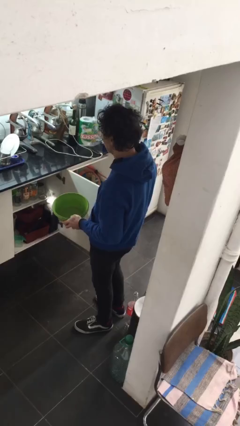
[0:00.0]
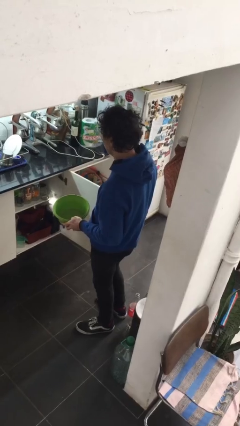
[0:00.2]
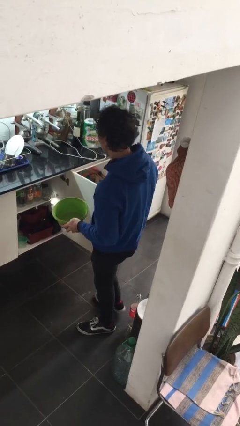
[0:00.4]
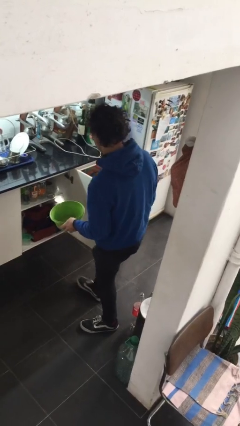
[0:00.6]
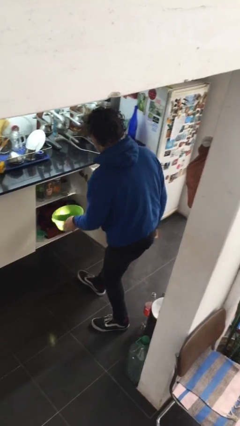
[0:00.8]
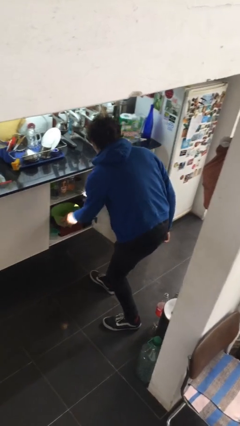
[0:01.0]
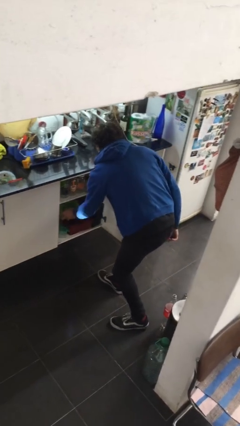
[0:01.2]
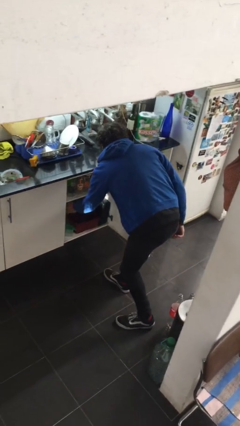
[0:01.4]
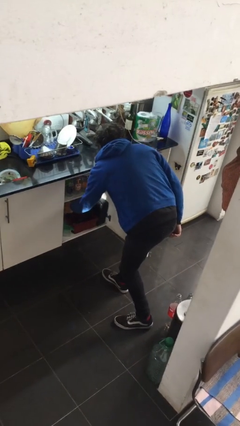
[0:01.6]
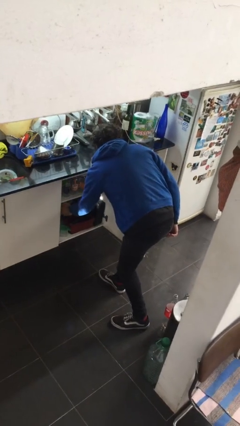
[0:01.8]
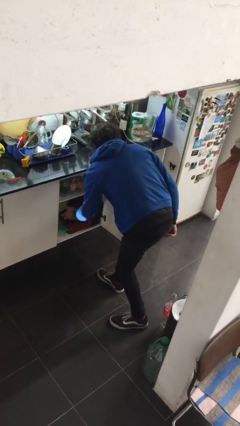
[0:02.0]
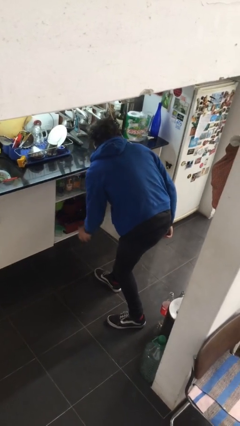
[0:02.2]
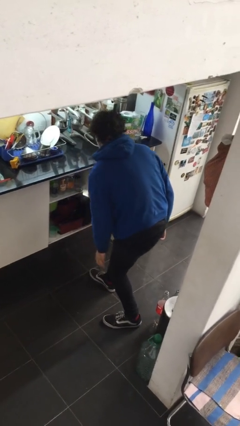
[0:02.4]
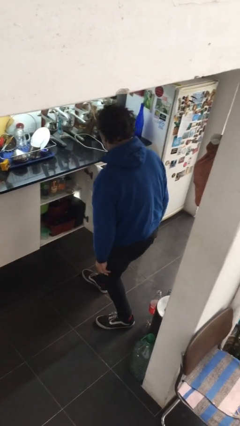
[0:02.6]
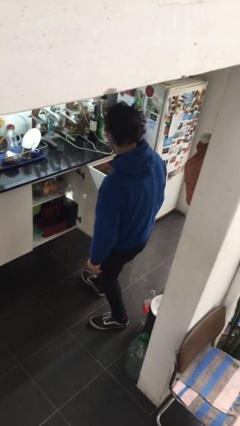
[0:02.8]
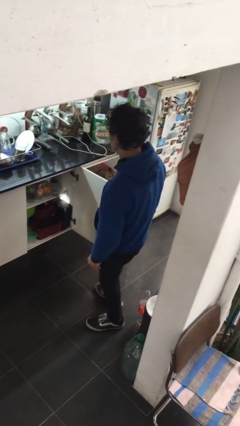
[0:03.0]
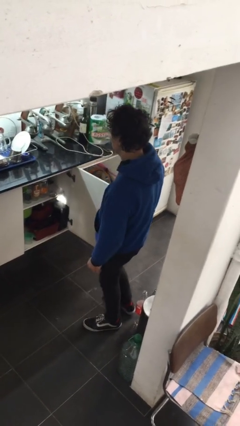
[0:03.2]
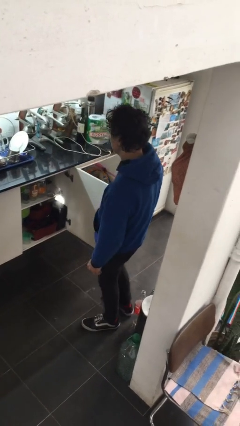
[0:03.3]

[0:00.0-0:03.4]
person puts down object into cabinet

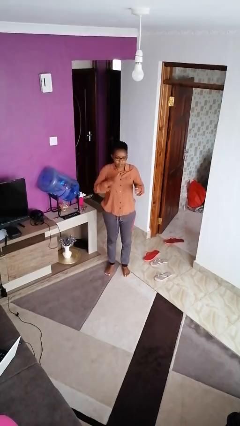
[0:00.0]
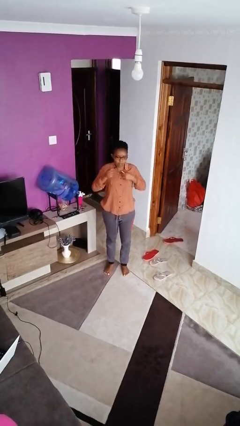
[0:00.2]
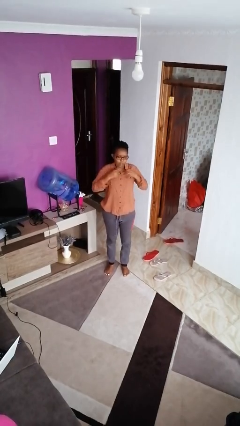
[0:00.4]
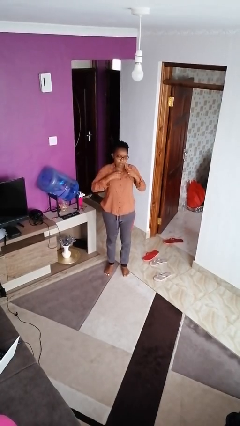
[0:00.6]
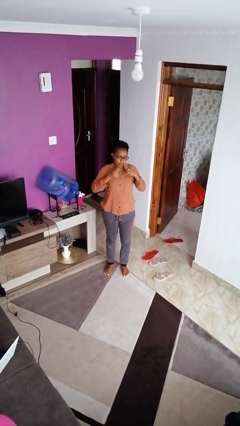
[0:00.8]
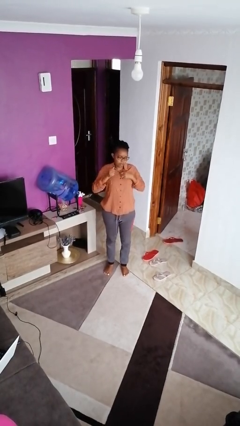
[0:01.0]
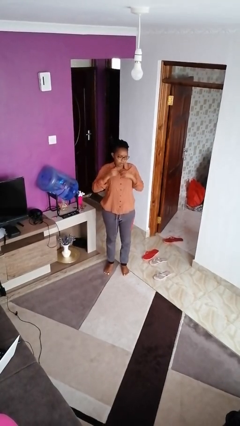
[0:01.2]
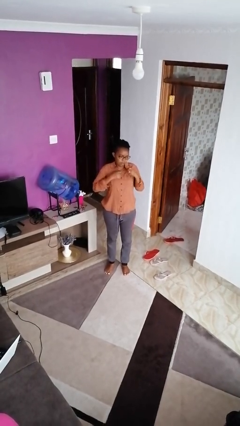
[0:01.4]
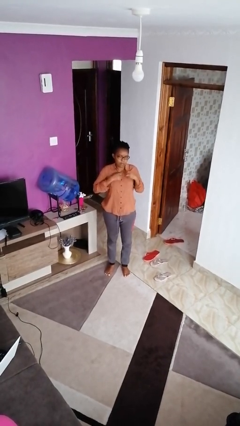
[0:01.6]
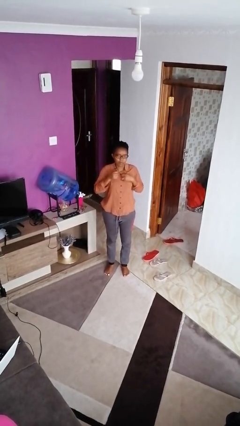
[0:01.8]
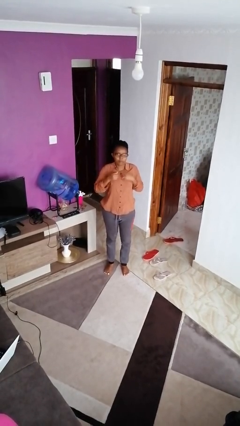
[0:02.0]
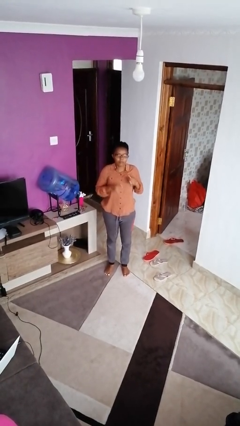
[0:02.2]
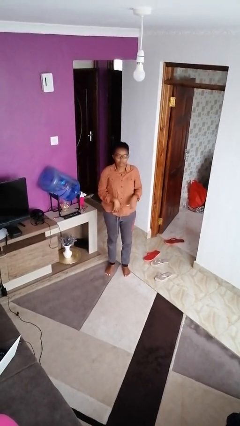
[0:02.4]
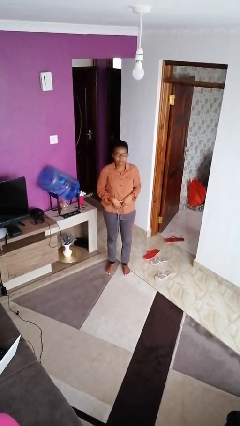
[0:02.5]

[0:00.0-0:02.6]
person drums on chest

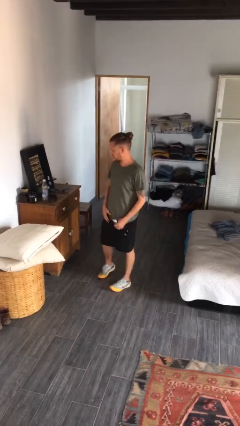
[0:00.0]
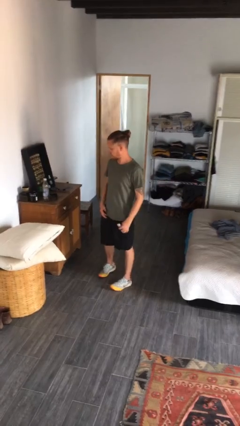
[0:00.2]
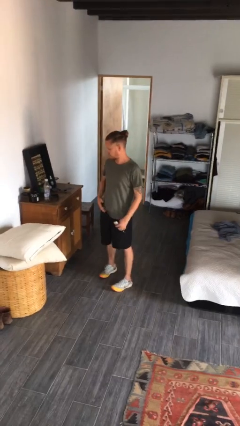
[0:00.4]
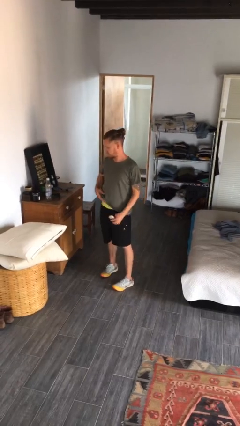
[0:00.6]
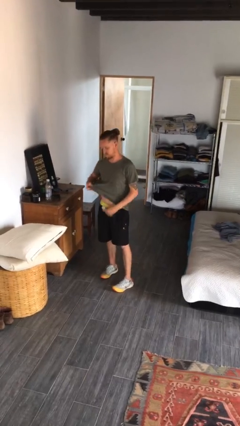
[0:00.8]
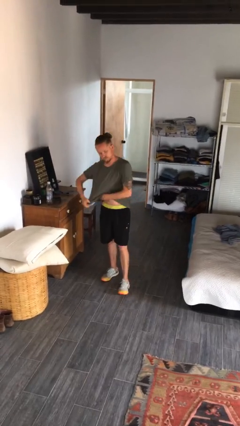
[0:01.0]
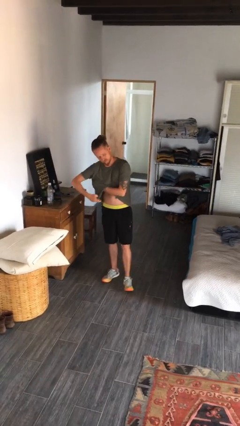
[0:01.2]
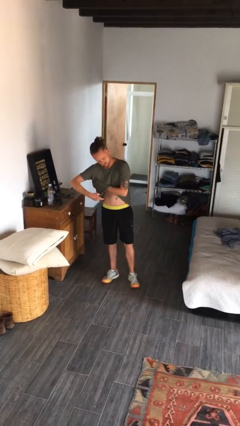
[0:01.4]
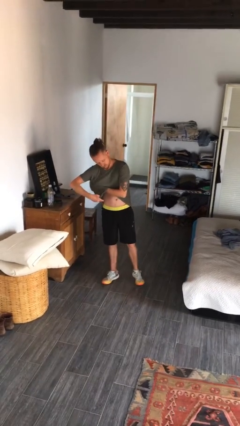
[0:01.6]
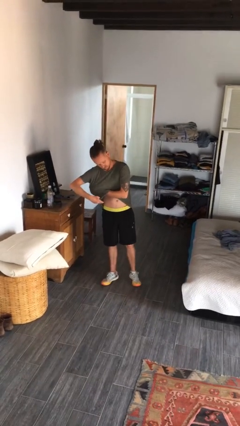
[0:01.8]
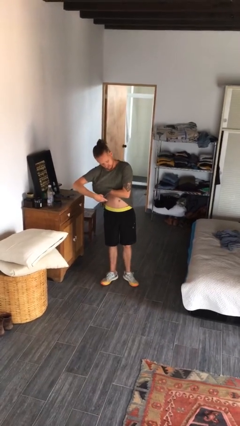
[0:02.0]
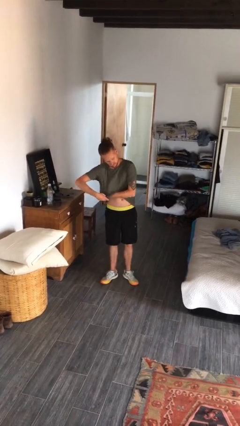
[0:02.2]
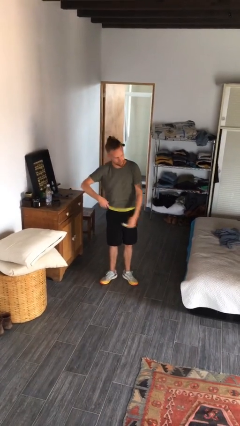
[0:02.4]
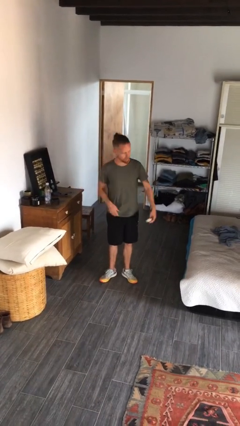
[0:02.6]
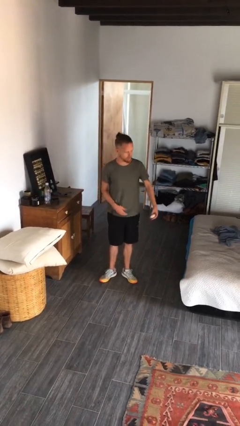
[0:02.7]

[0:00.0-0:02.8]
person applies deodorant

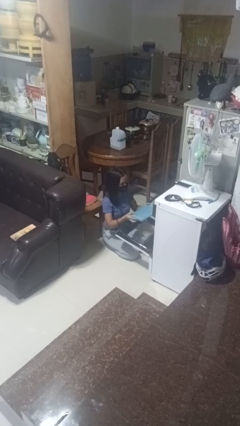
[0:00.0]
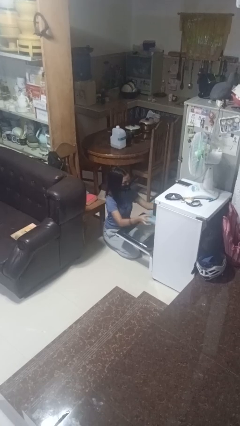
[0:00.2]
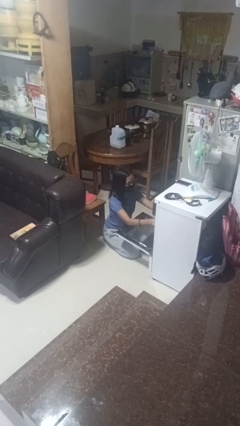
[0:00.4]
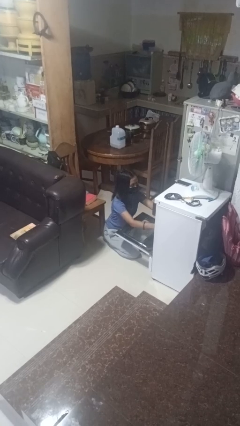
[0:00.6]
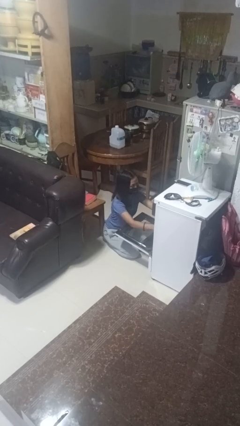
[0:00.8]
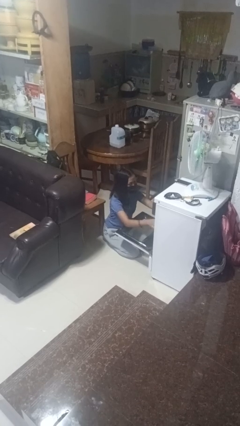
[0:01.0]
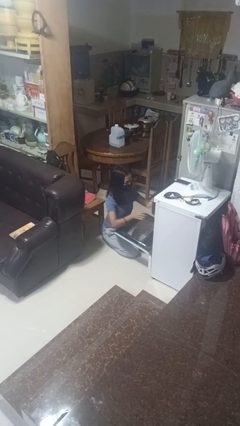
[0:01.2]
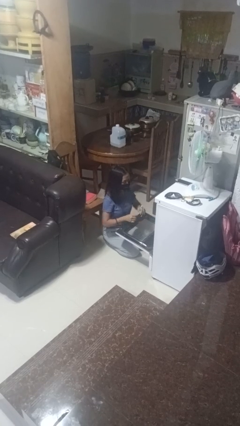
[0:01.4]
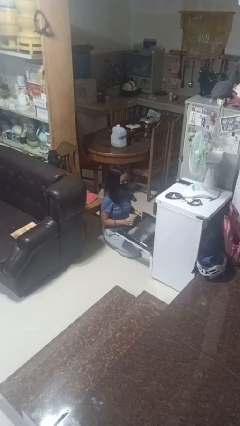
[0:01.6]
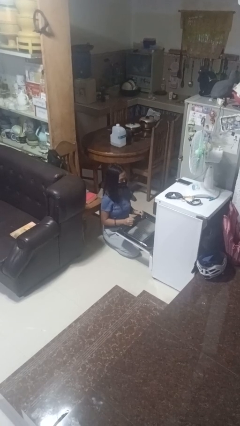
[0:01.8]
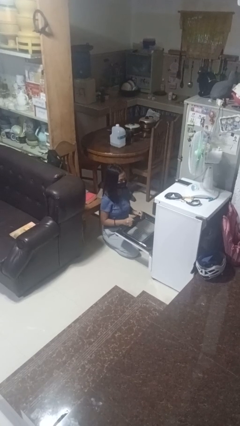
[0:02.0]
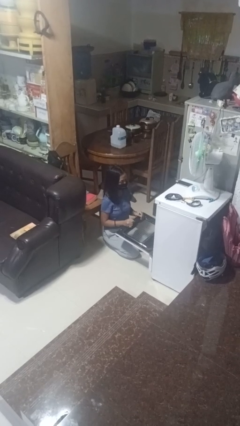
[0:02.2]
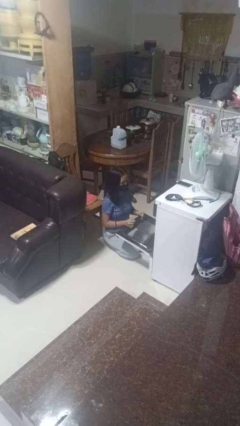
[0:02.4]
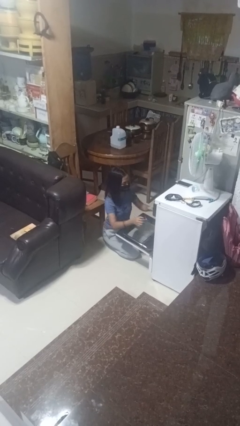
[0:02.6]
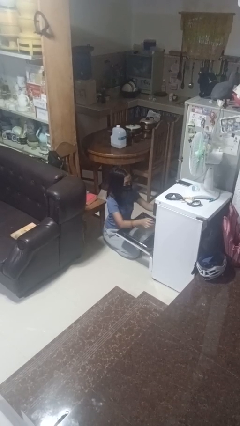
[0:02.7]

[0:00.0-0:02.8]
person puts object into oven

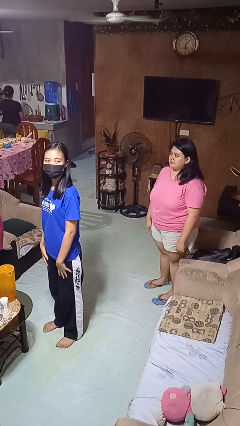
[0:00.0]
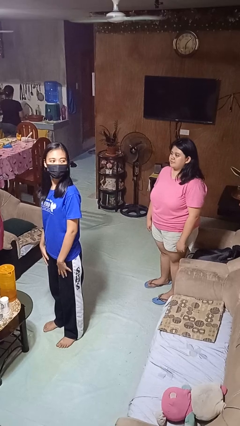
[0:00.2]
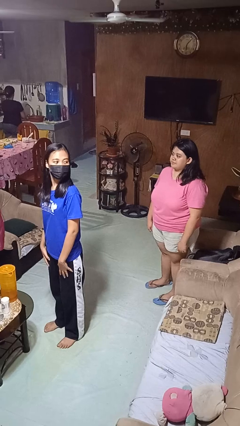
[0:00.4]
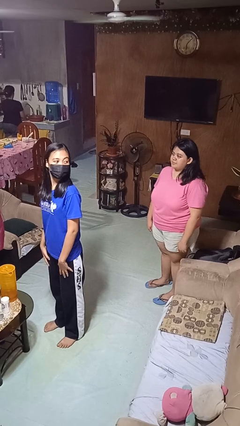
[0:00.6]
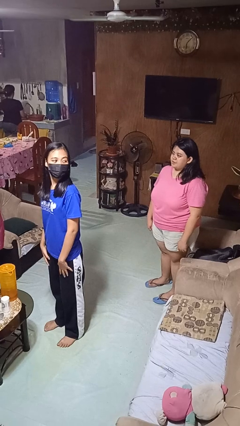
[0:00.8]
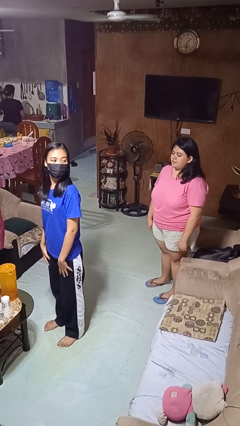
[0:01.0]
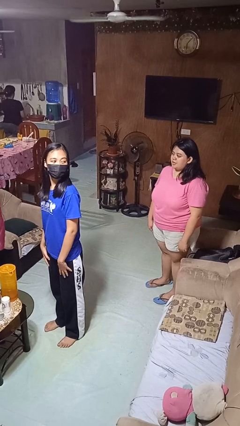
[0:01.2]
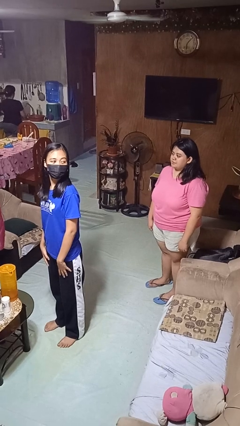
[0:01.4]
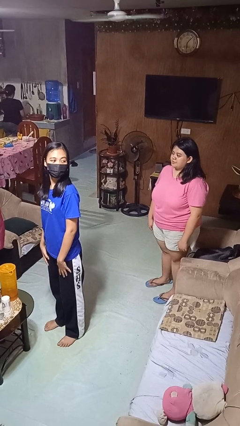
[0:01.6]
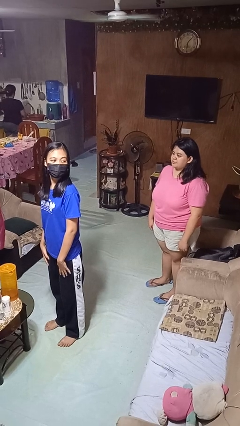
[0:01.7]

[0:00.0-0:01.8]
person looks over shoulder

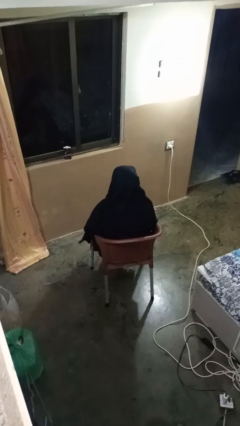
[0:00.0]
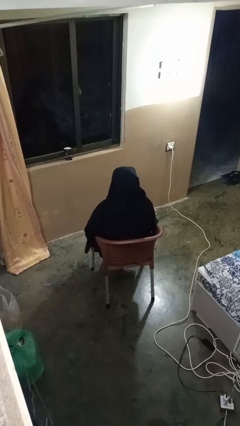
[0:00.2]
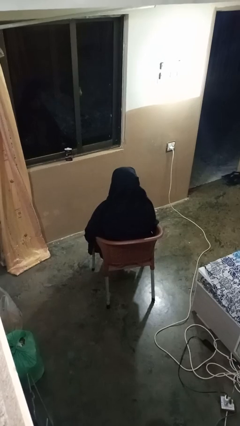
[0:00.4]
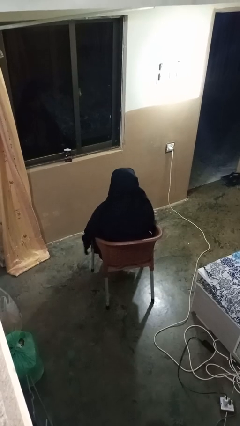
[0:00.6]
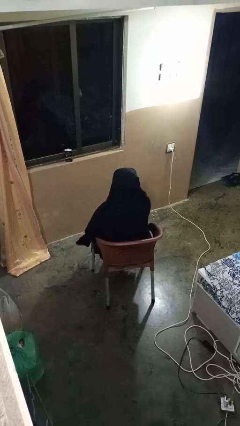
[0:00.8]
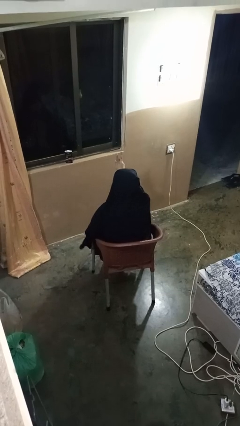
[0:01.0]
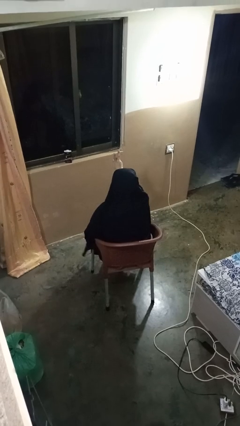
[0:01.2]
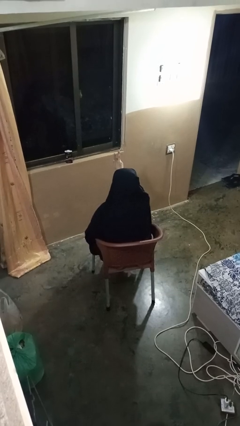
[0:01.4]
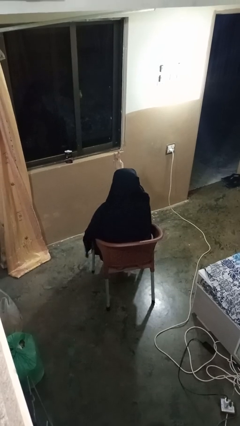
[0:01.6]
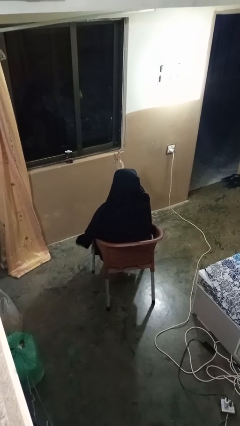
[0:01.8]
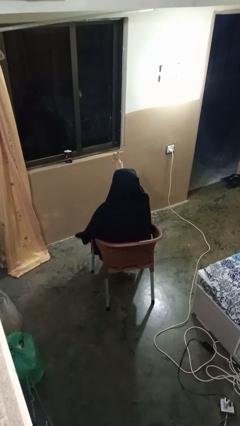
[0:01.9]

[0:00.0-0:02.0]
person gestures peace

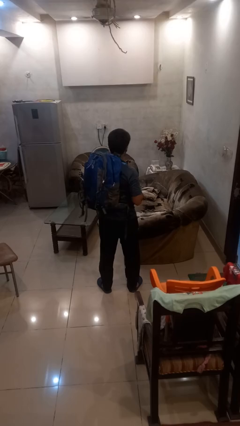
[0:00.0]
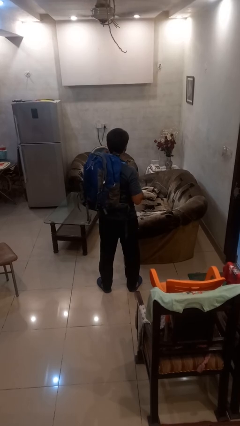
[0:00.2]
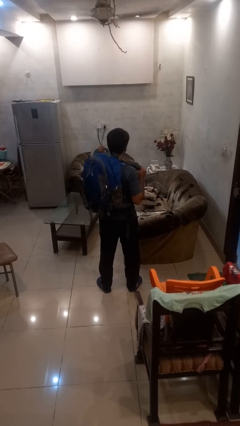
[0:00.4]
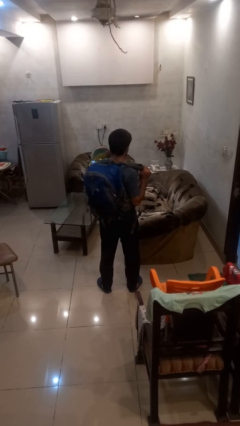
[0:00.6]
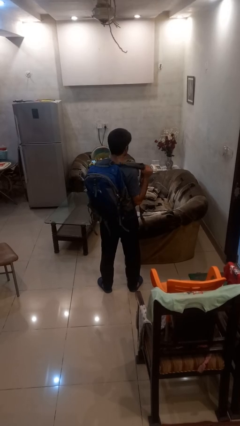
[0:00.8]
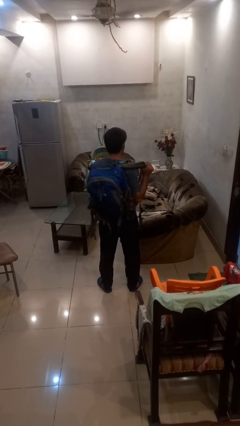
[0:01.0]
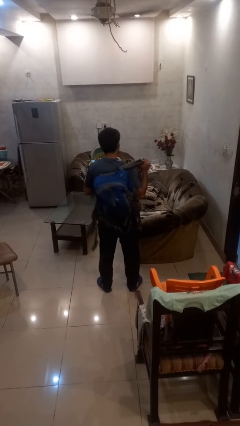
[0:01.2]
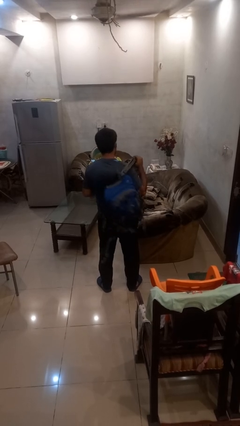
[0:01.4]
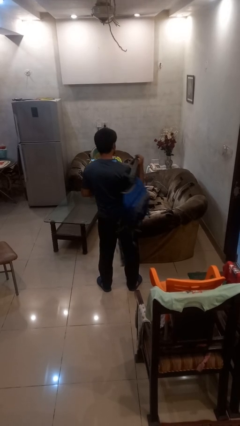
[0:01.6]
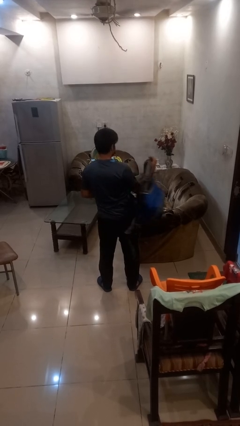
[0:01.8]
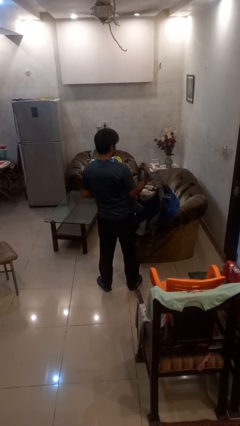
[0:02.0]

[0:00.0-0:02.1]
person takes off backpack
